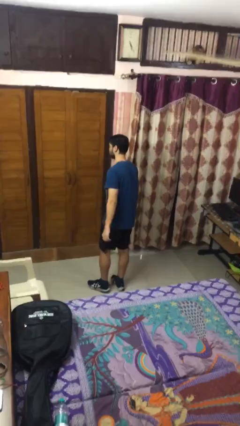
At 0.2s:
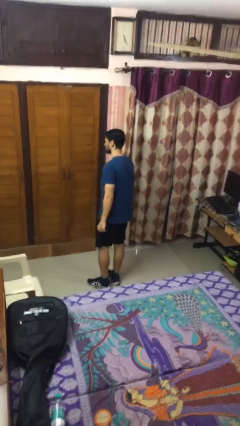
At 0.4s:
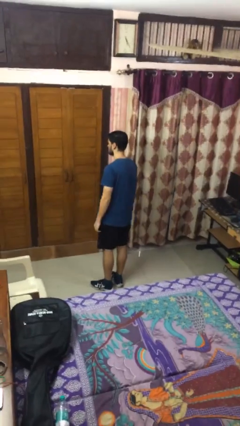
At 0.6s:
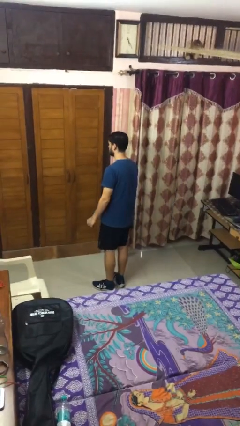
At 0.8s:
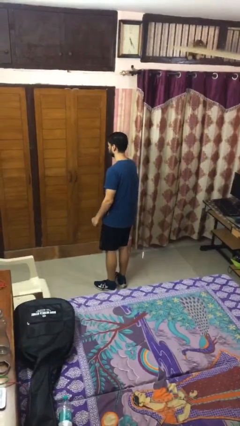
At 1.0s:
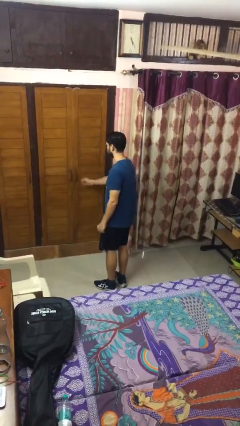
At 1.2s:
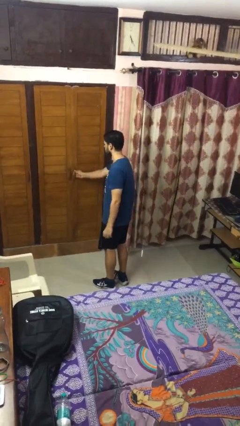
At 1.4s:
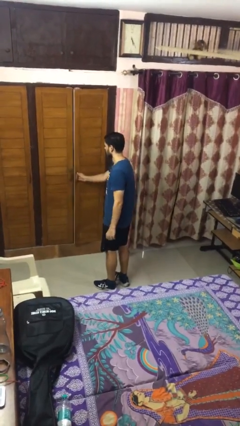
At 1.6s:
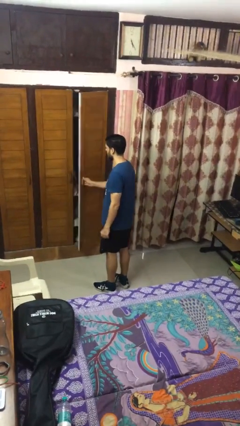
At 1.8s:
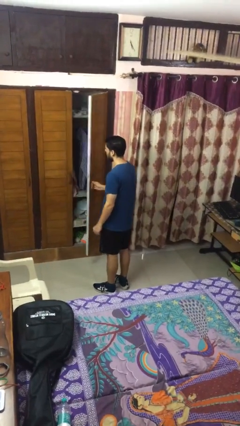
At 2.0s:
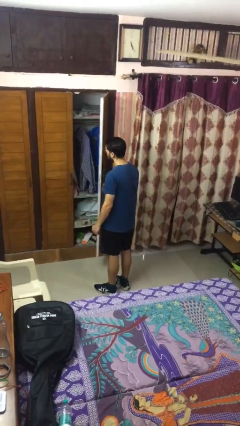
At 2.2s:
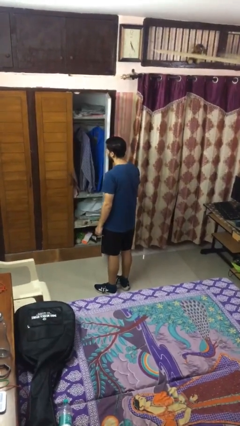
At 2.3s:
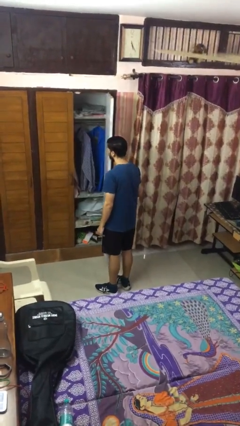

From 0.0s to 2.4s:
person opens closet door

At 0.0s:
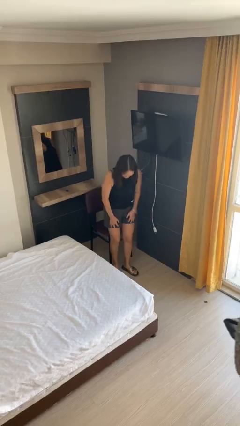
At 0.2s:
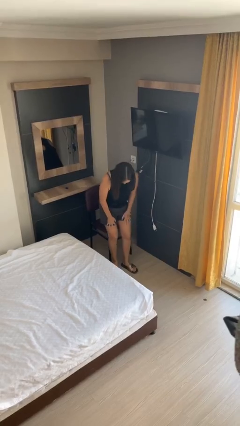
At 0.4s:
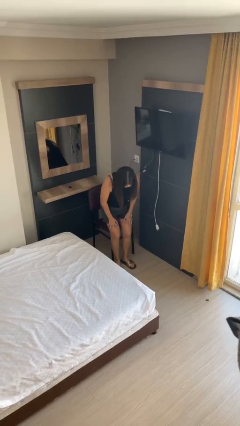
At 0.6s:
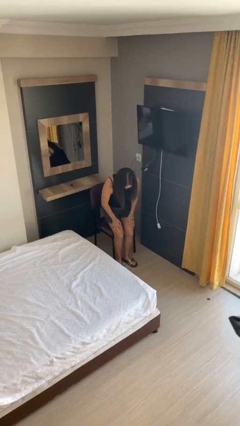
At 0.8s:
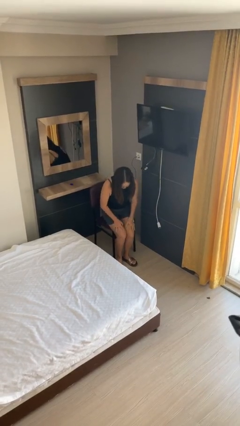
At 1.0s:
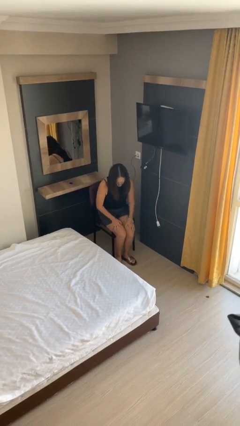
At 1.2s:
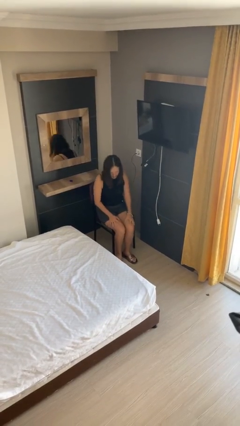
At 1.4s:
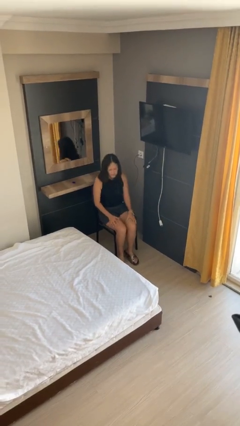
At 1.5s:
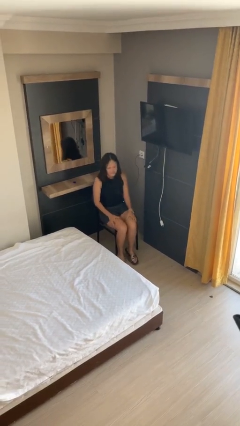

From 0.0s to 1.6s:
person sits down

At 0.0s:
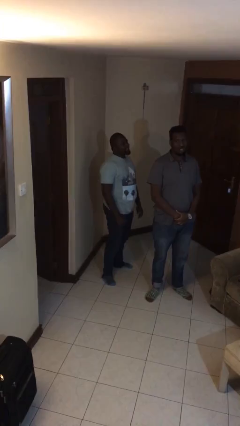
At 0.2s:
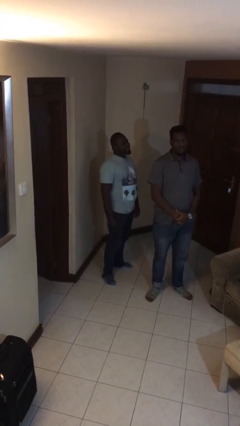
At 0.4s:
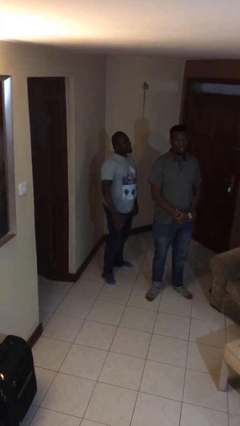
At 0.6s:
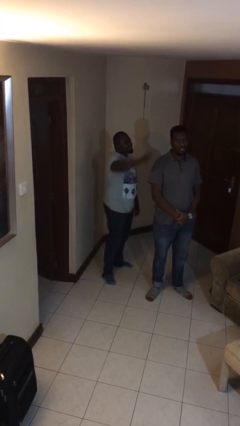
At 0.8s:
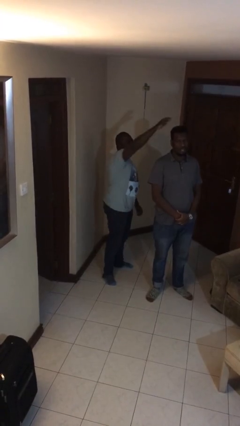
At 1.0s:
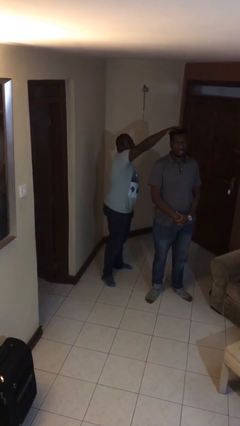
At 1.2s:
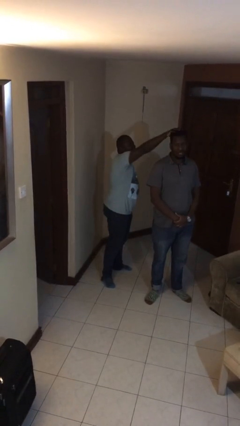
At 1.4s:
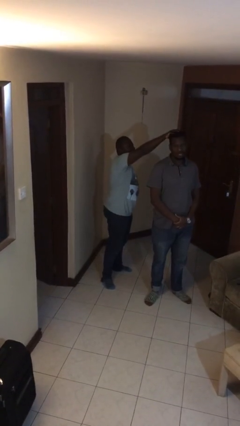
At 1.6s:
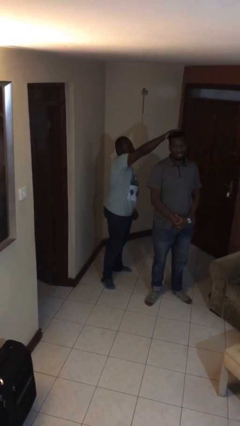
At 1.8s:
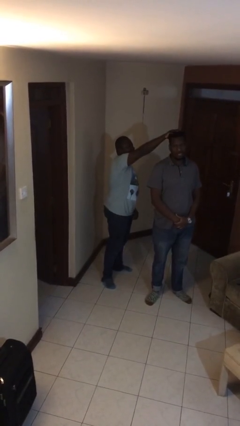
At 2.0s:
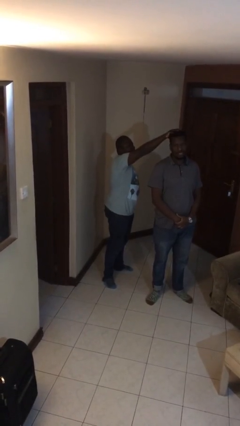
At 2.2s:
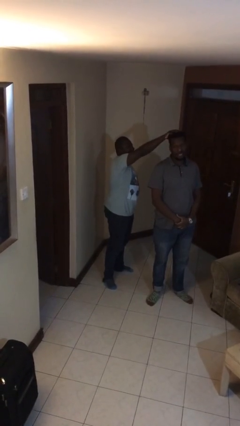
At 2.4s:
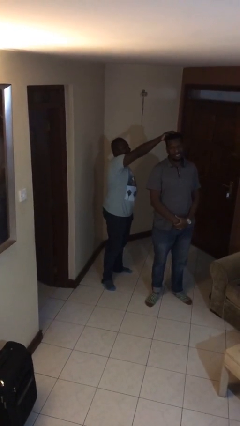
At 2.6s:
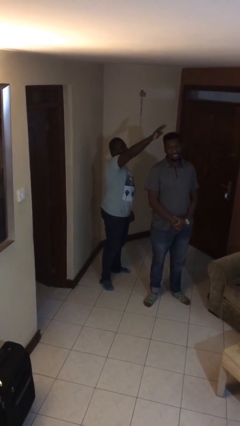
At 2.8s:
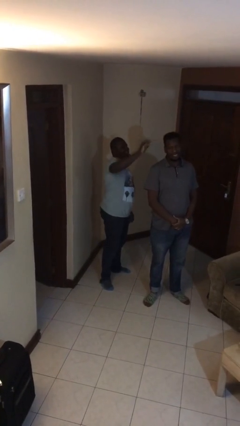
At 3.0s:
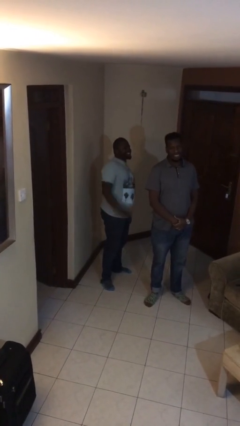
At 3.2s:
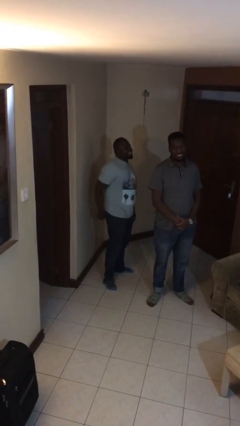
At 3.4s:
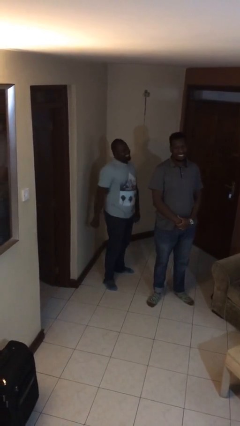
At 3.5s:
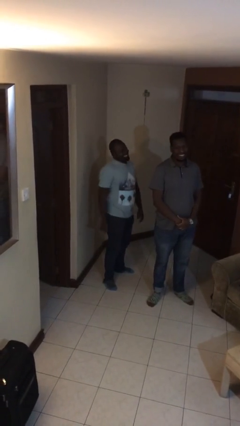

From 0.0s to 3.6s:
person grabs person by hair

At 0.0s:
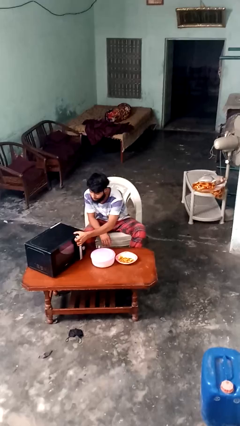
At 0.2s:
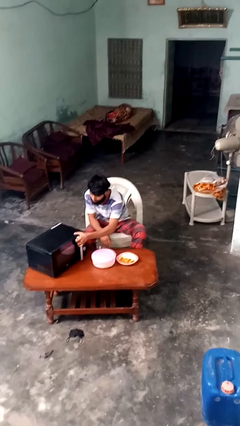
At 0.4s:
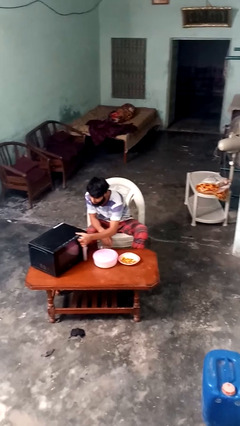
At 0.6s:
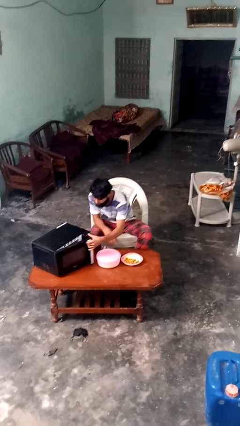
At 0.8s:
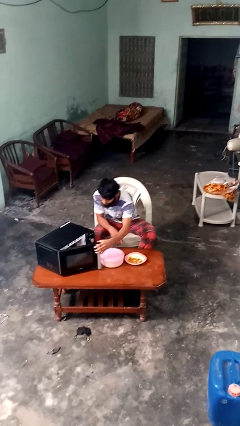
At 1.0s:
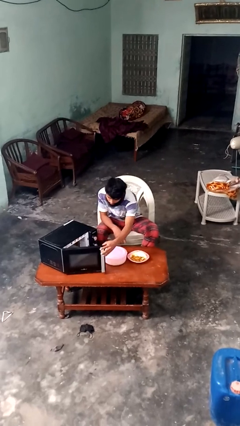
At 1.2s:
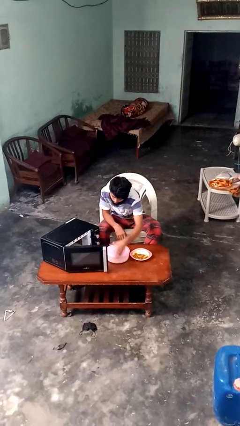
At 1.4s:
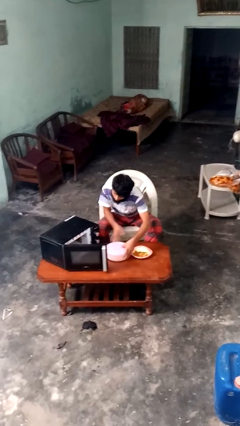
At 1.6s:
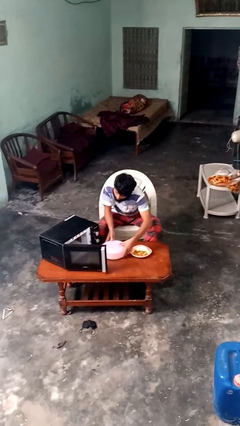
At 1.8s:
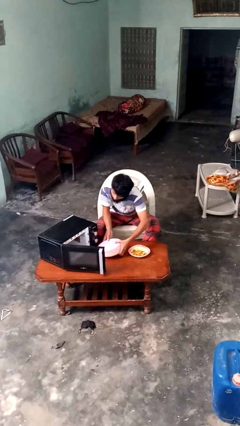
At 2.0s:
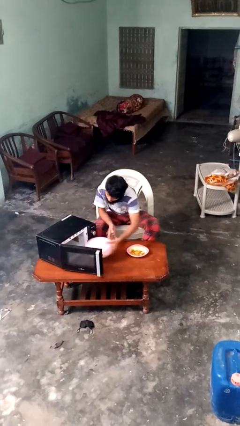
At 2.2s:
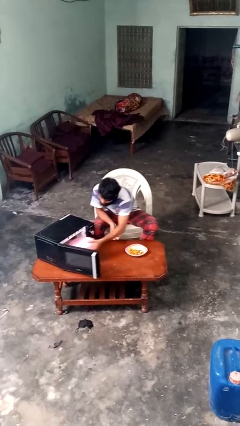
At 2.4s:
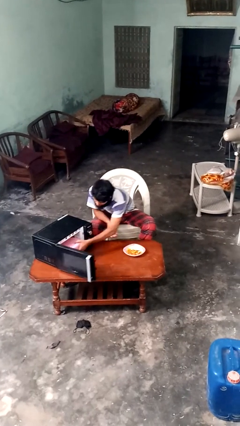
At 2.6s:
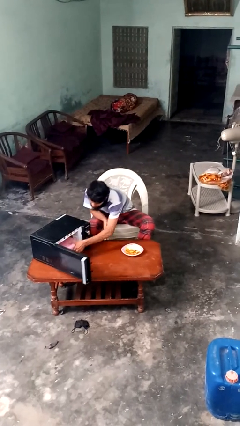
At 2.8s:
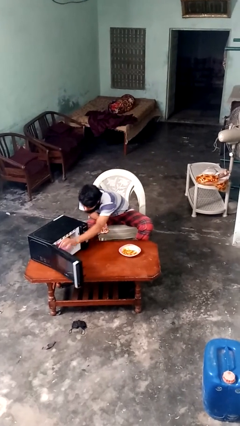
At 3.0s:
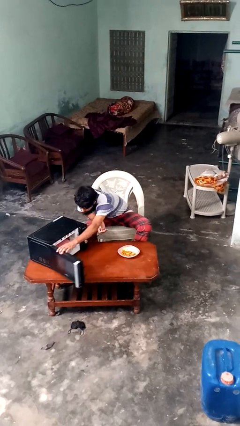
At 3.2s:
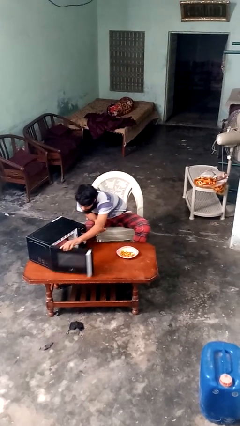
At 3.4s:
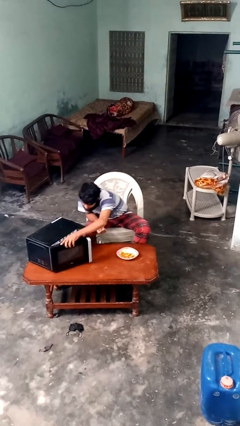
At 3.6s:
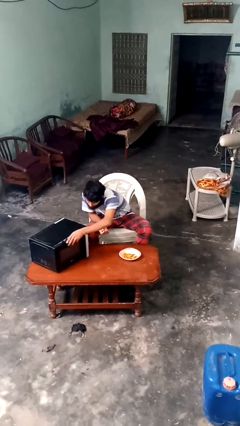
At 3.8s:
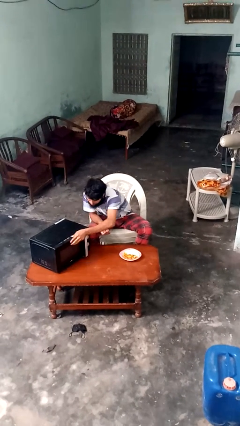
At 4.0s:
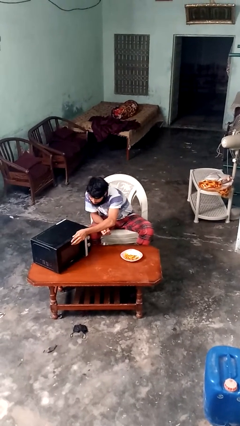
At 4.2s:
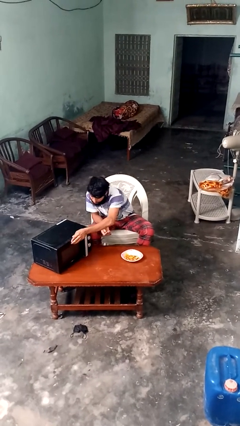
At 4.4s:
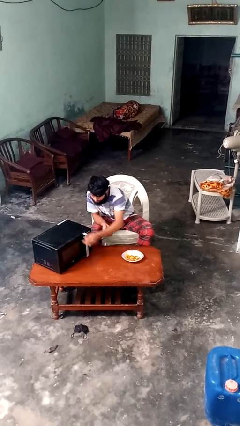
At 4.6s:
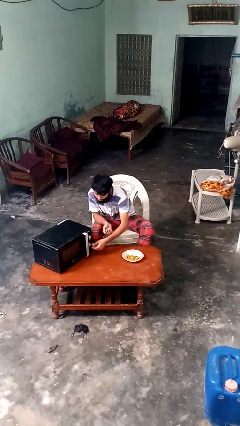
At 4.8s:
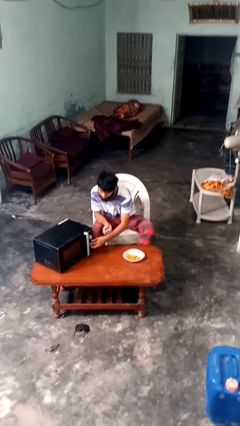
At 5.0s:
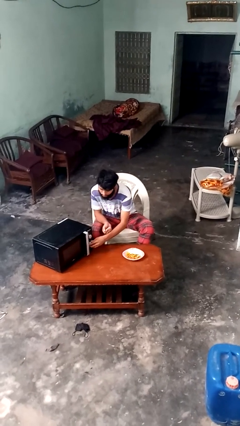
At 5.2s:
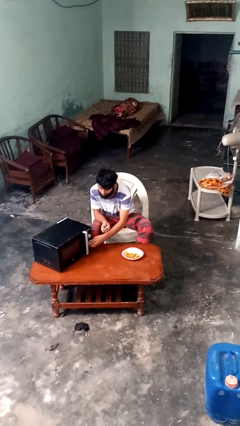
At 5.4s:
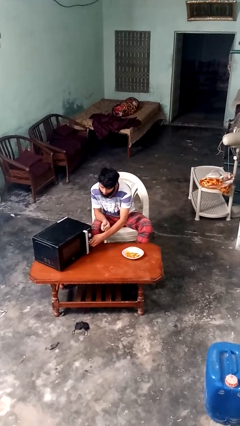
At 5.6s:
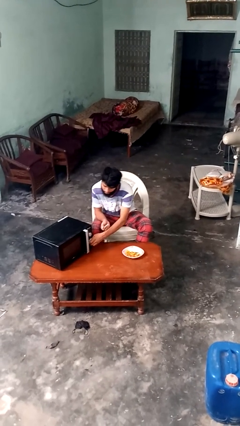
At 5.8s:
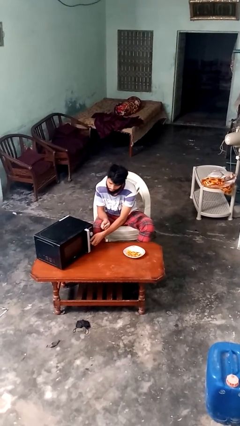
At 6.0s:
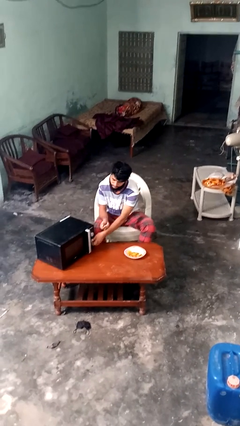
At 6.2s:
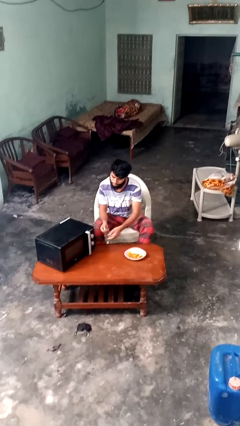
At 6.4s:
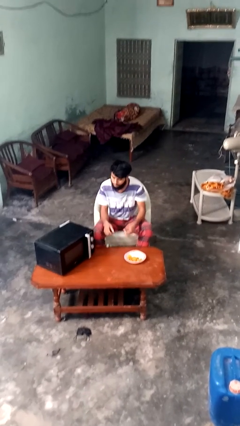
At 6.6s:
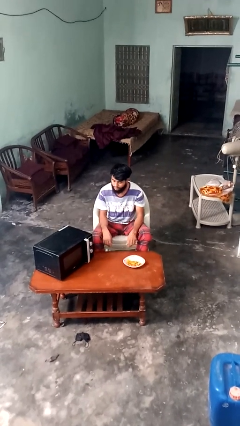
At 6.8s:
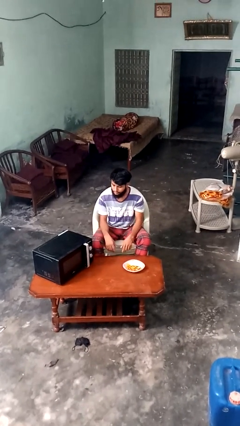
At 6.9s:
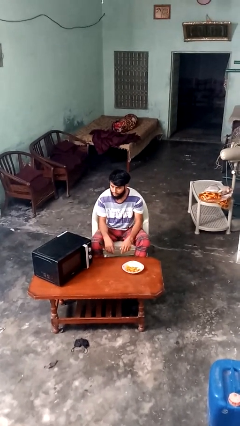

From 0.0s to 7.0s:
person puts object into microwave

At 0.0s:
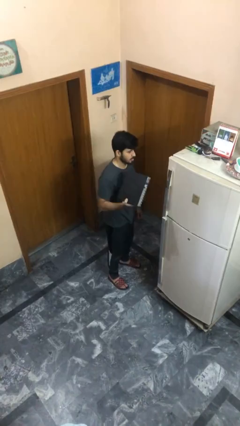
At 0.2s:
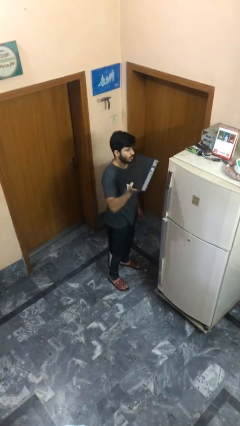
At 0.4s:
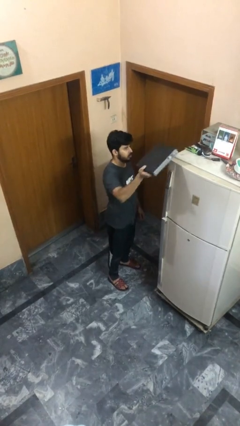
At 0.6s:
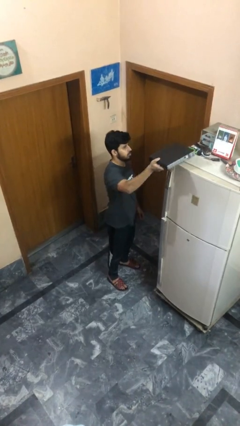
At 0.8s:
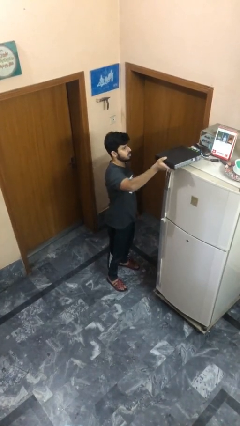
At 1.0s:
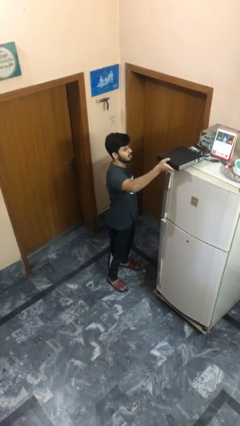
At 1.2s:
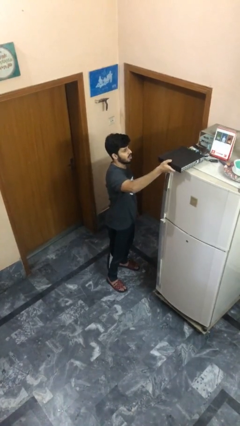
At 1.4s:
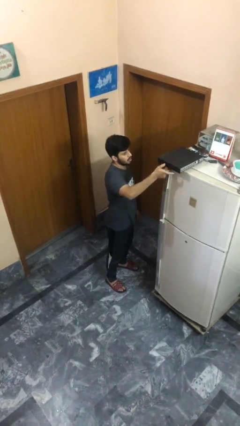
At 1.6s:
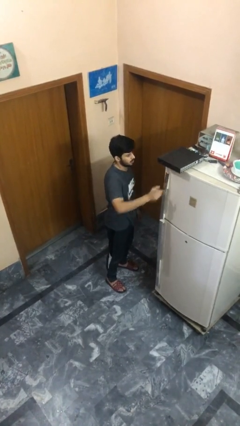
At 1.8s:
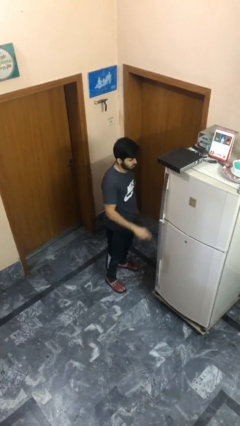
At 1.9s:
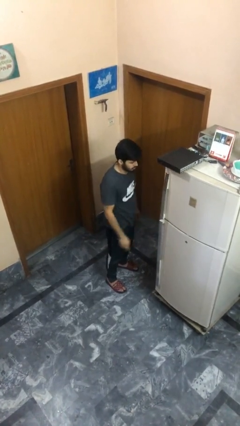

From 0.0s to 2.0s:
person puts down object on countertop

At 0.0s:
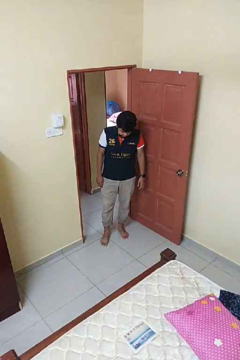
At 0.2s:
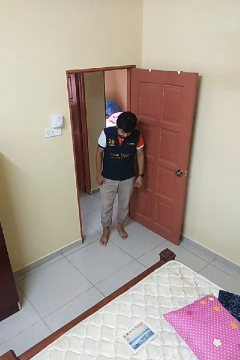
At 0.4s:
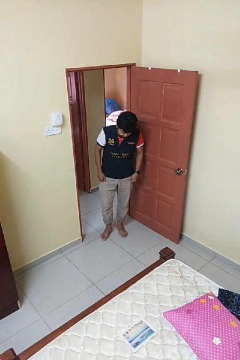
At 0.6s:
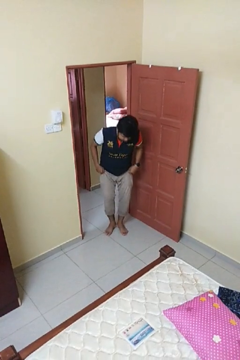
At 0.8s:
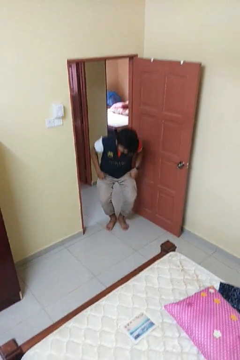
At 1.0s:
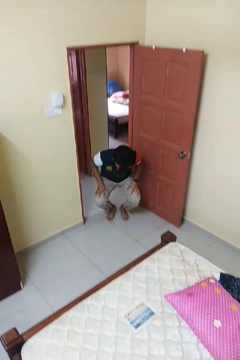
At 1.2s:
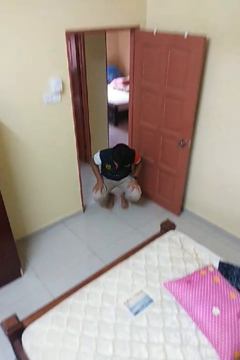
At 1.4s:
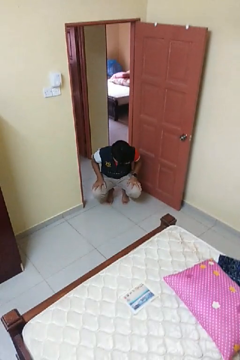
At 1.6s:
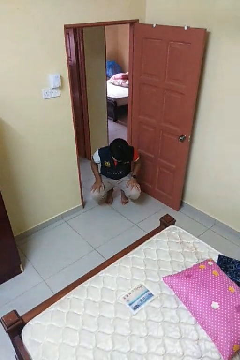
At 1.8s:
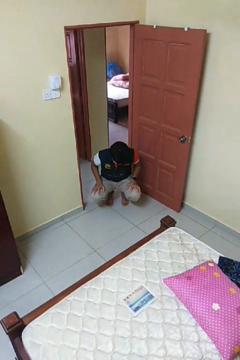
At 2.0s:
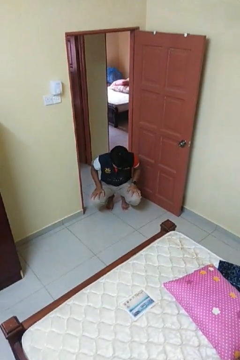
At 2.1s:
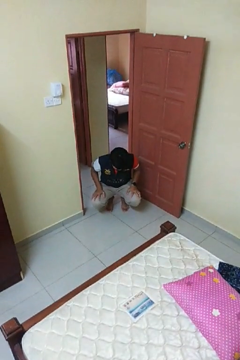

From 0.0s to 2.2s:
person squats
